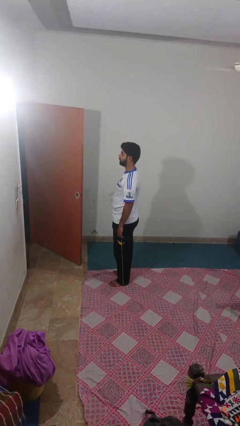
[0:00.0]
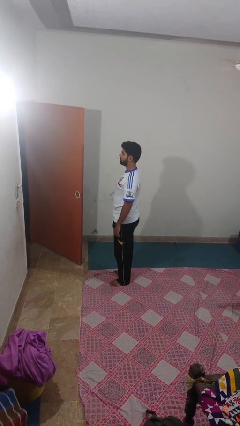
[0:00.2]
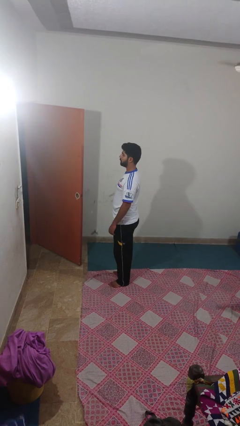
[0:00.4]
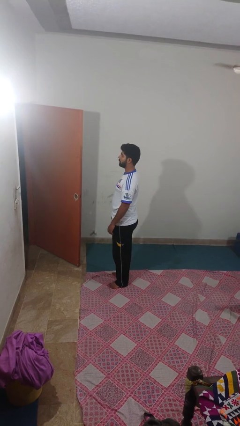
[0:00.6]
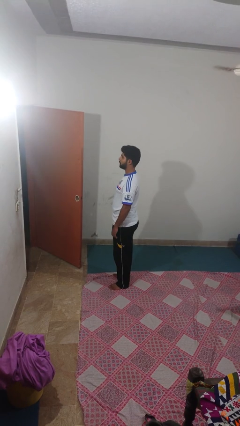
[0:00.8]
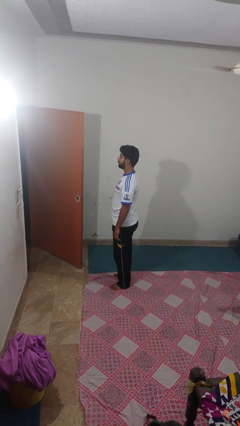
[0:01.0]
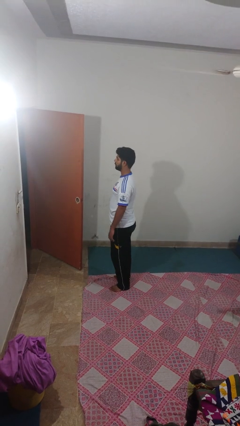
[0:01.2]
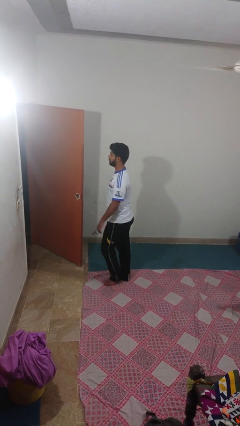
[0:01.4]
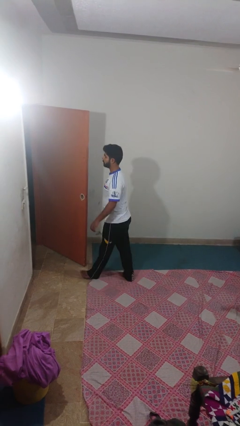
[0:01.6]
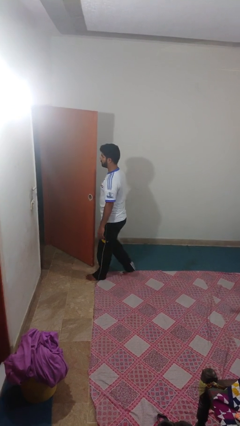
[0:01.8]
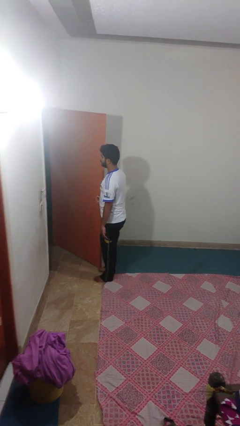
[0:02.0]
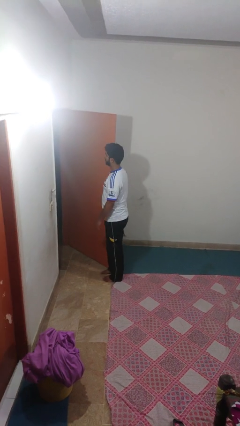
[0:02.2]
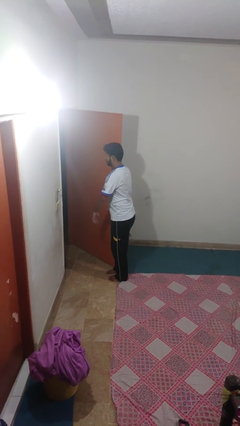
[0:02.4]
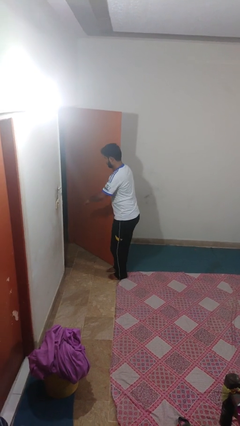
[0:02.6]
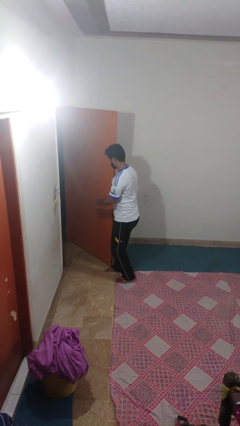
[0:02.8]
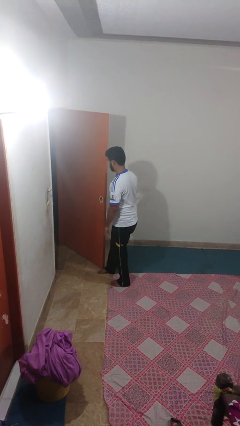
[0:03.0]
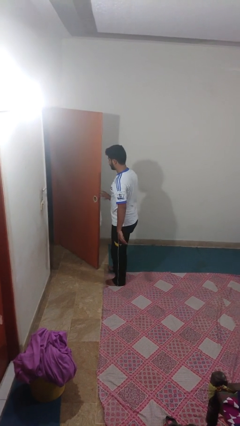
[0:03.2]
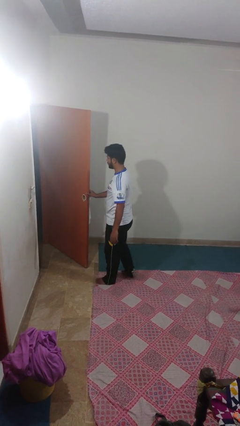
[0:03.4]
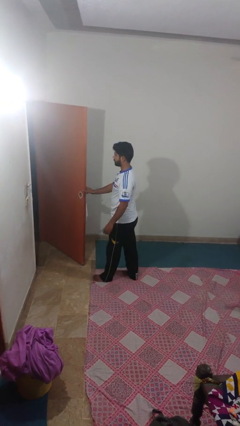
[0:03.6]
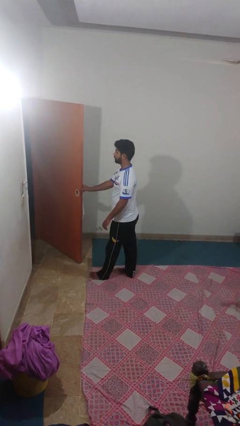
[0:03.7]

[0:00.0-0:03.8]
person bumps into wall

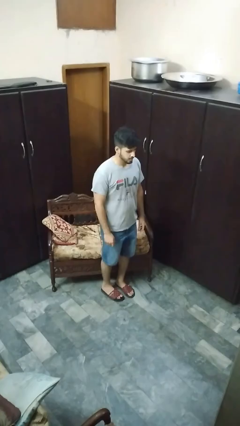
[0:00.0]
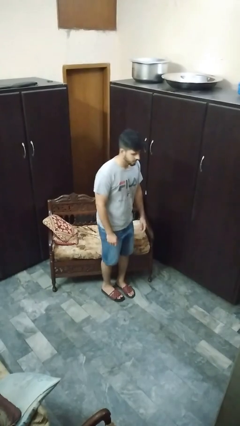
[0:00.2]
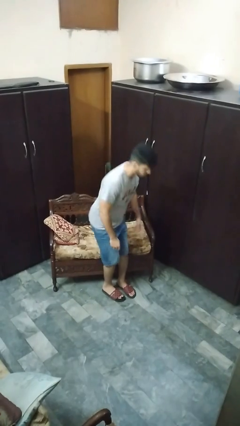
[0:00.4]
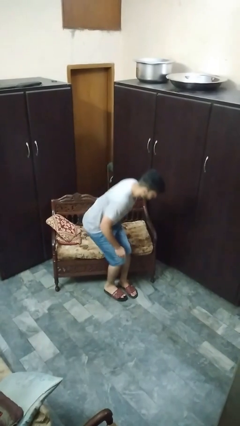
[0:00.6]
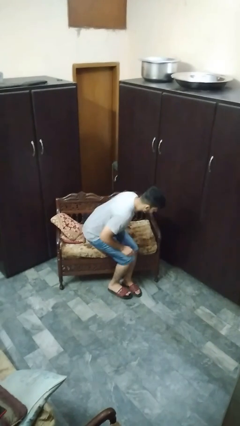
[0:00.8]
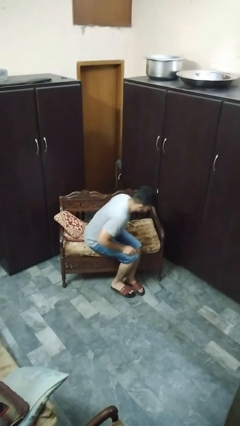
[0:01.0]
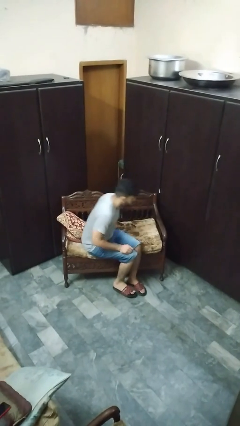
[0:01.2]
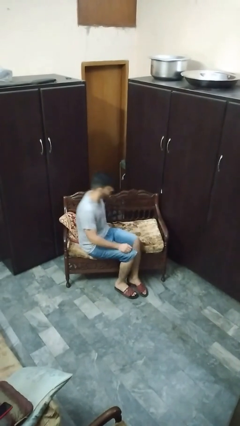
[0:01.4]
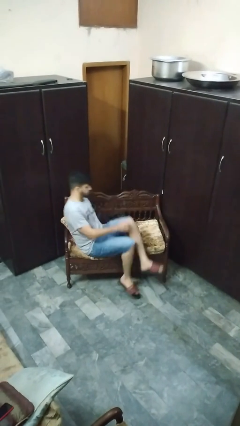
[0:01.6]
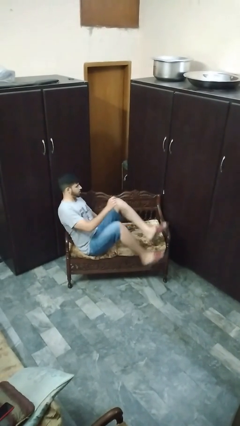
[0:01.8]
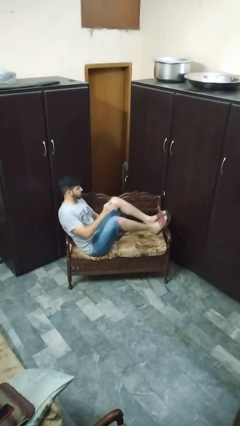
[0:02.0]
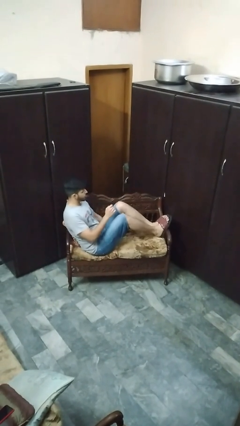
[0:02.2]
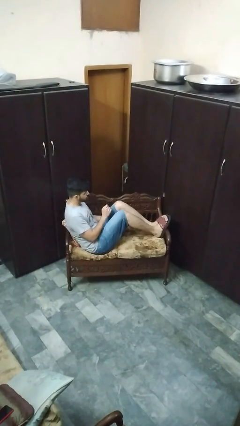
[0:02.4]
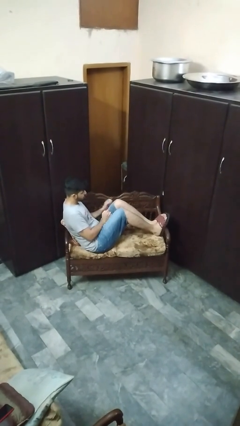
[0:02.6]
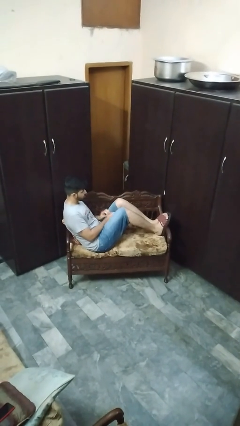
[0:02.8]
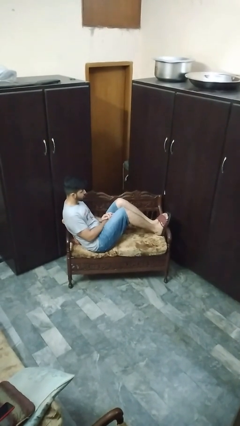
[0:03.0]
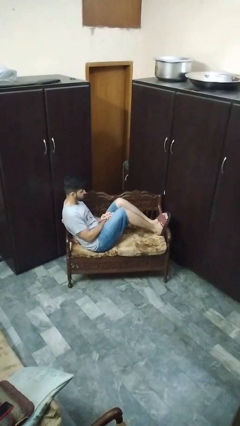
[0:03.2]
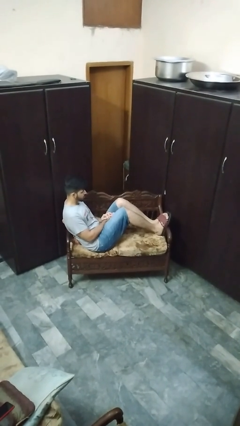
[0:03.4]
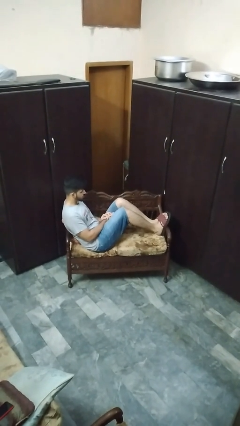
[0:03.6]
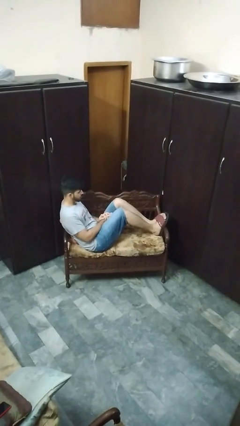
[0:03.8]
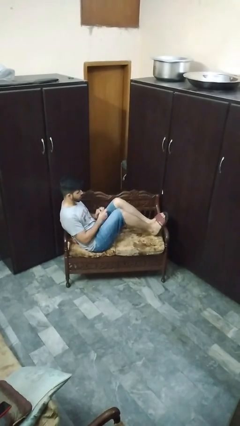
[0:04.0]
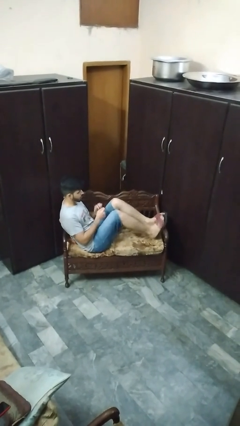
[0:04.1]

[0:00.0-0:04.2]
person lies down on couch

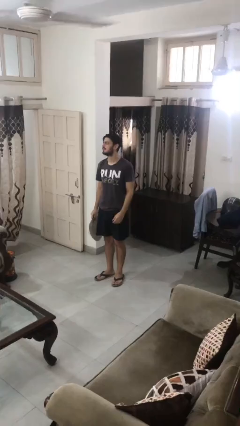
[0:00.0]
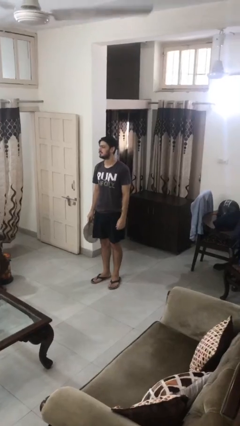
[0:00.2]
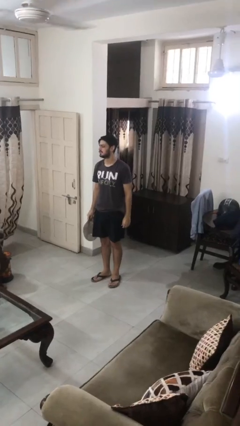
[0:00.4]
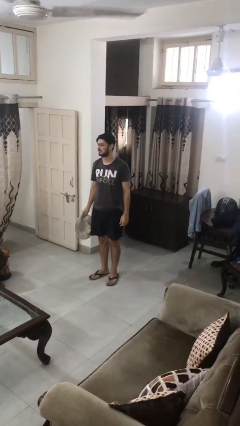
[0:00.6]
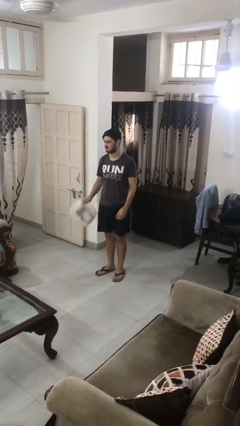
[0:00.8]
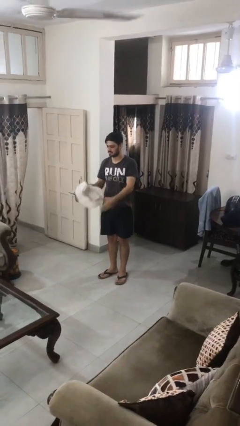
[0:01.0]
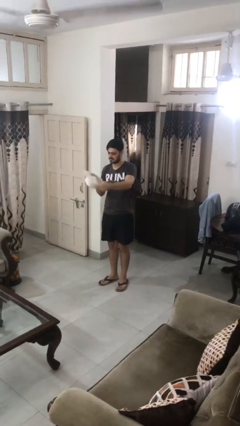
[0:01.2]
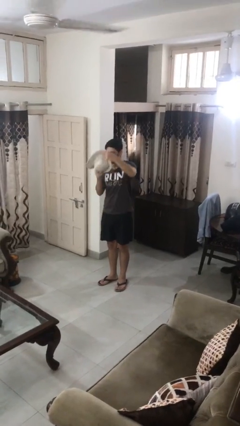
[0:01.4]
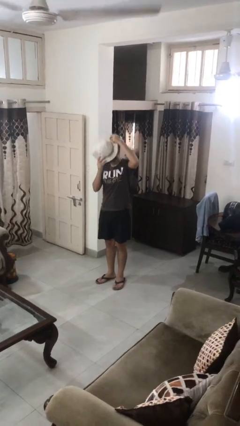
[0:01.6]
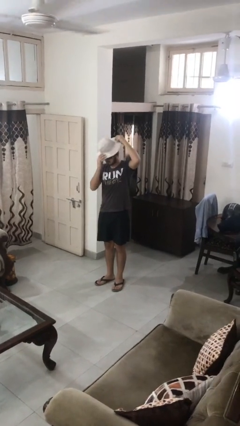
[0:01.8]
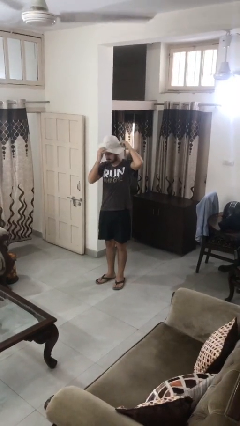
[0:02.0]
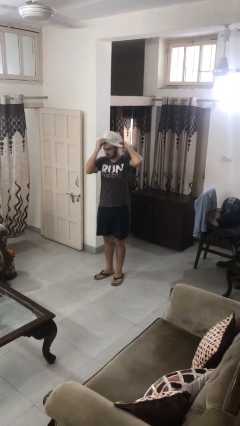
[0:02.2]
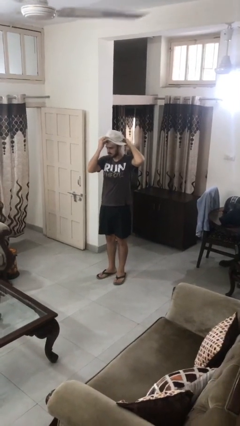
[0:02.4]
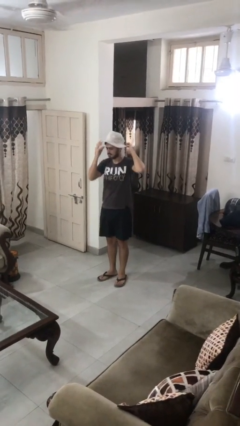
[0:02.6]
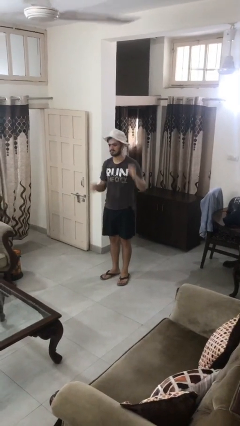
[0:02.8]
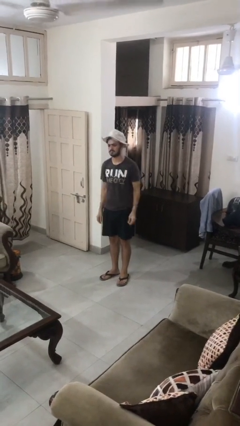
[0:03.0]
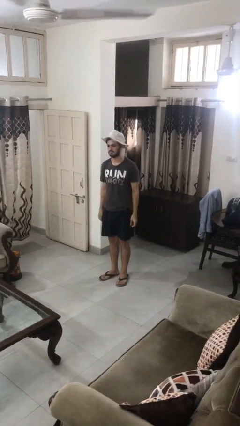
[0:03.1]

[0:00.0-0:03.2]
person puts on hat

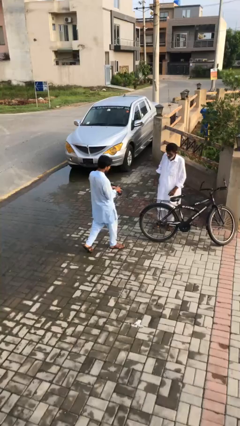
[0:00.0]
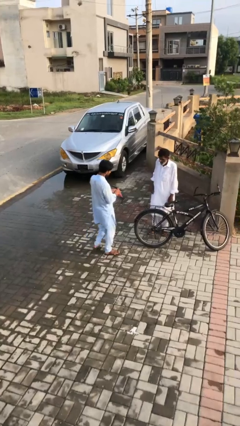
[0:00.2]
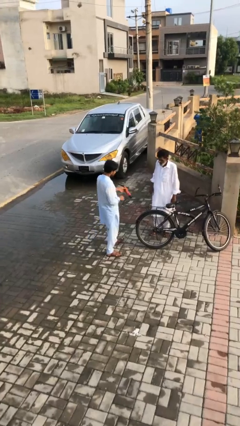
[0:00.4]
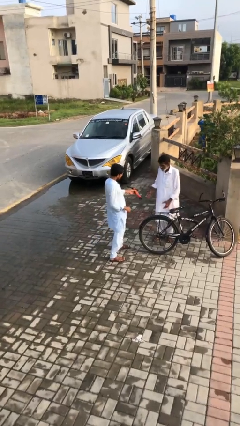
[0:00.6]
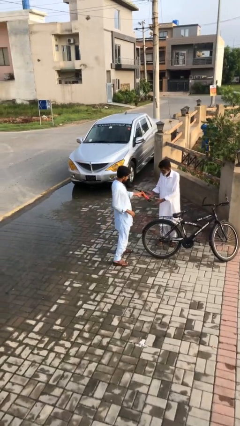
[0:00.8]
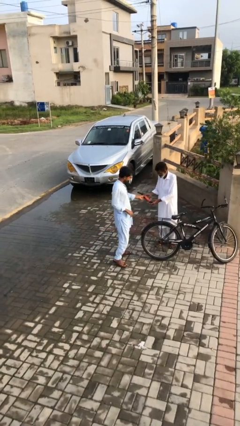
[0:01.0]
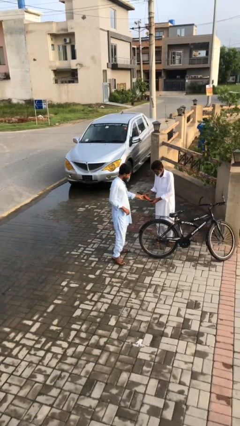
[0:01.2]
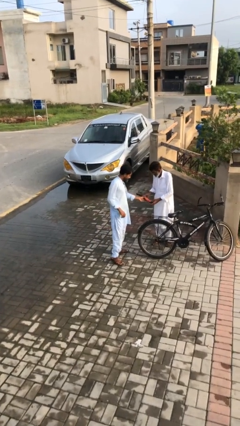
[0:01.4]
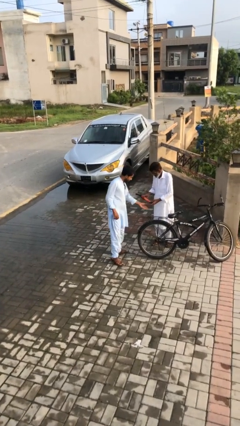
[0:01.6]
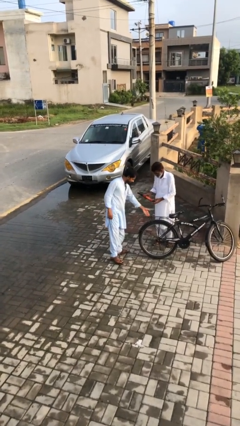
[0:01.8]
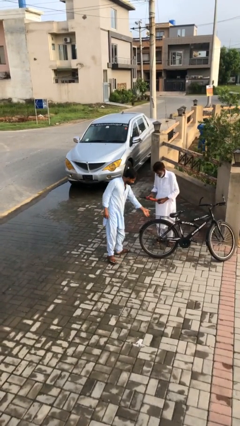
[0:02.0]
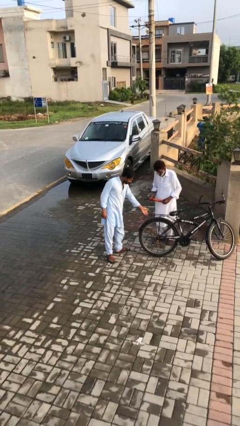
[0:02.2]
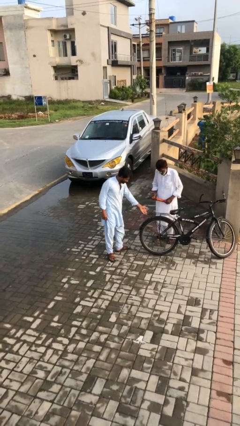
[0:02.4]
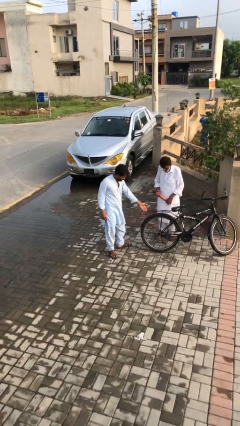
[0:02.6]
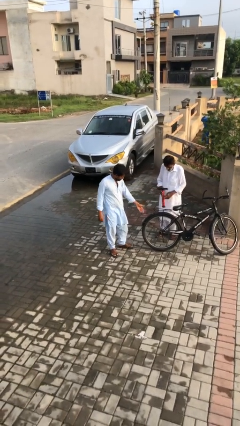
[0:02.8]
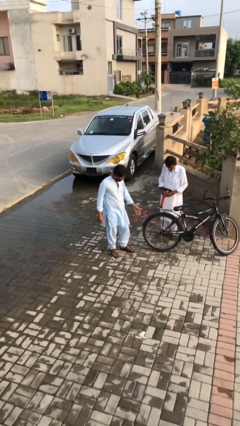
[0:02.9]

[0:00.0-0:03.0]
person transfers object to person

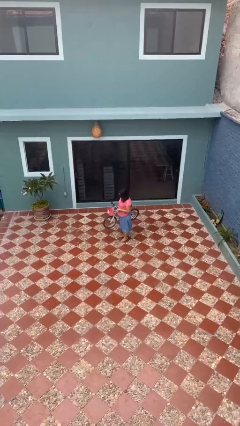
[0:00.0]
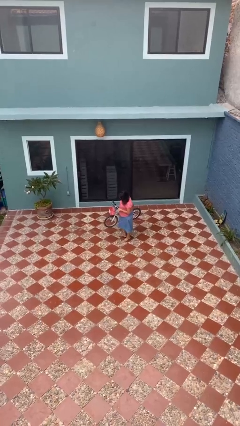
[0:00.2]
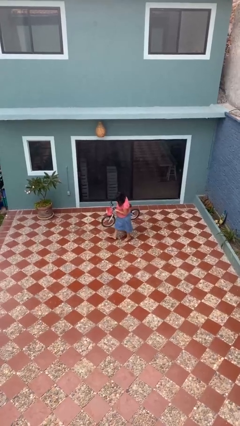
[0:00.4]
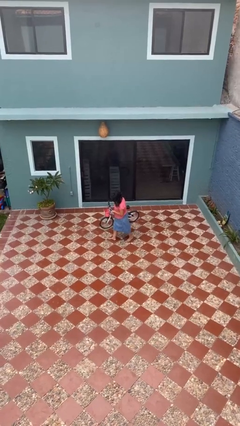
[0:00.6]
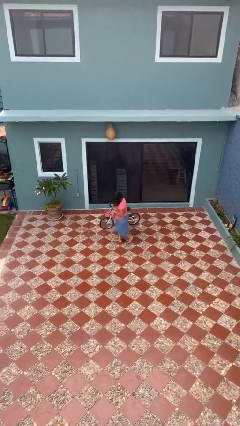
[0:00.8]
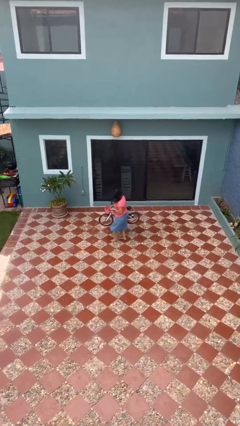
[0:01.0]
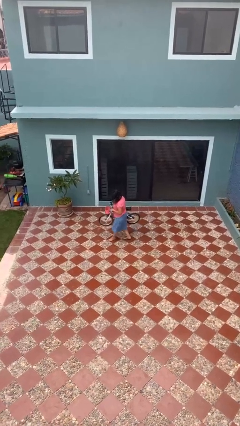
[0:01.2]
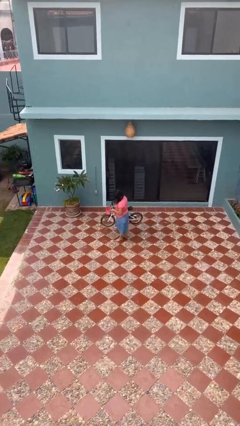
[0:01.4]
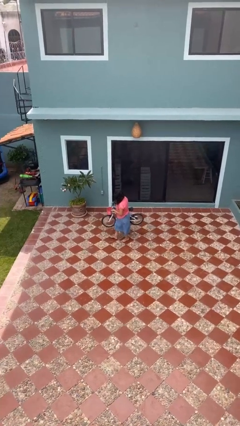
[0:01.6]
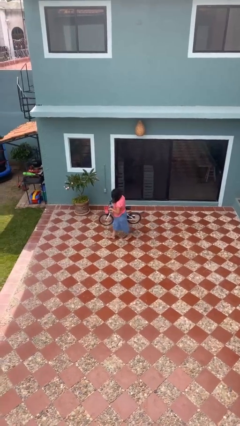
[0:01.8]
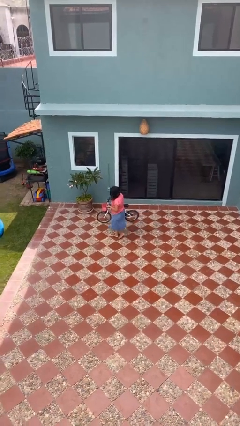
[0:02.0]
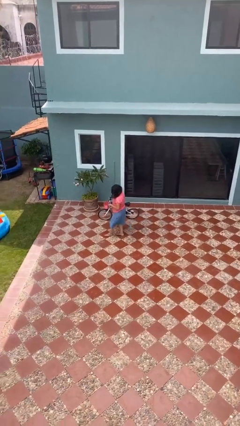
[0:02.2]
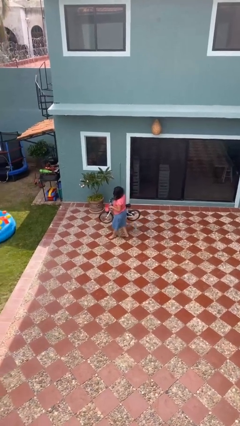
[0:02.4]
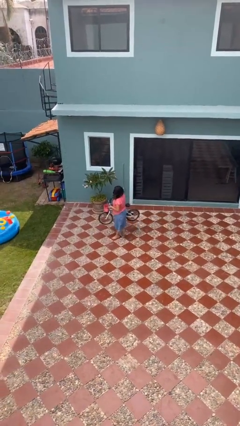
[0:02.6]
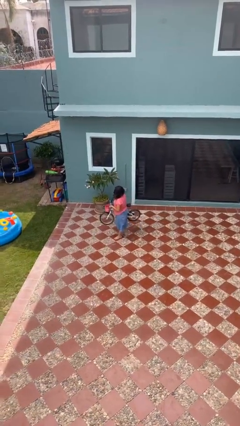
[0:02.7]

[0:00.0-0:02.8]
person carries bicycle

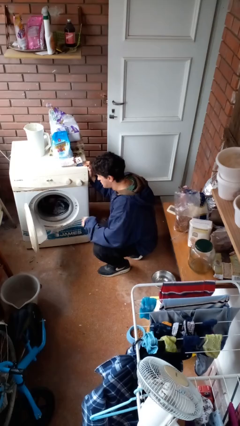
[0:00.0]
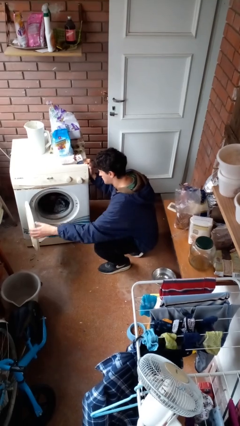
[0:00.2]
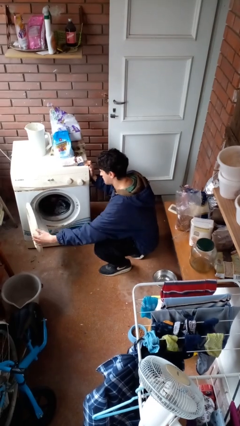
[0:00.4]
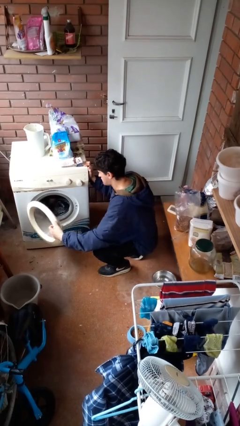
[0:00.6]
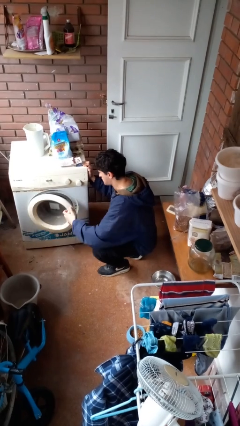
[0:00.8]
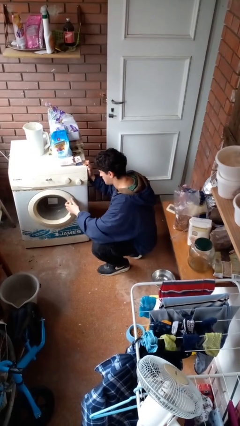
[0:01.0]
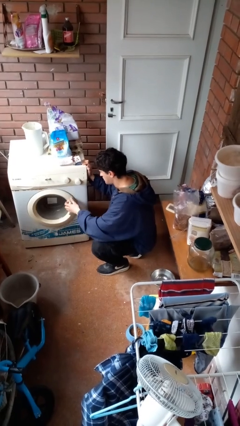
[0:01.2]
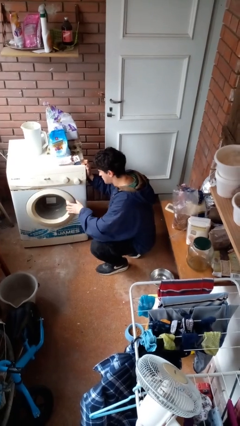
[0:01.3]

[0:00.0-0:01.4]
person closes clothes washer
